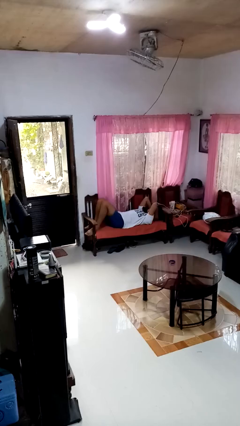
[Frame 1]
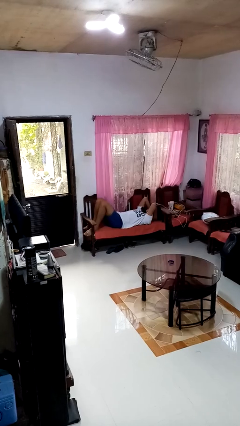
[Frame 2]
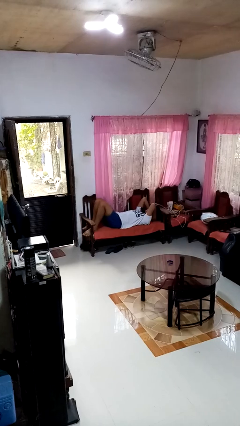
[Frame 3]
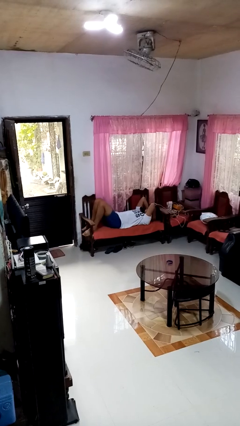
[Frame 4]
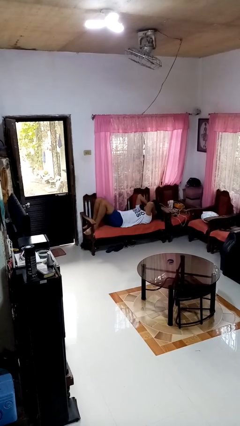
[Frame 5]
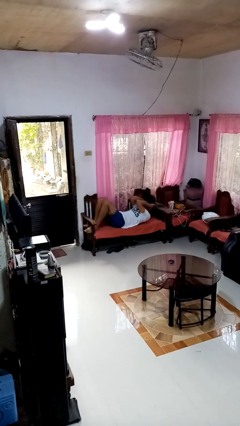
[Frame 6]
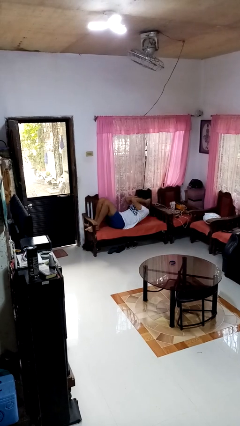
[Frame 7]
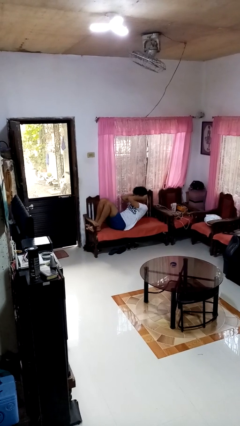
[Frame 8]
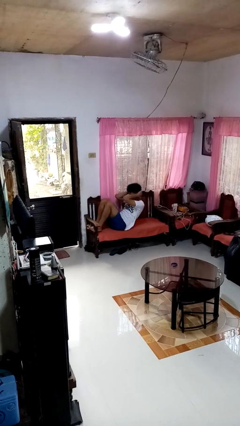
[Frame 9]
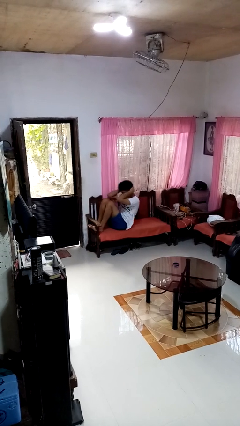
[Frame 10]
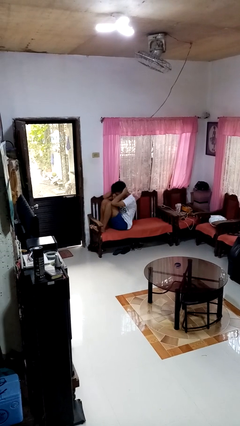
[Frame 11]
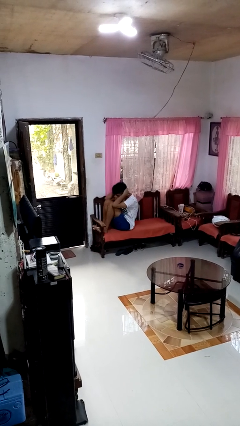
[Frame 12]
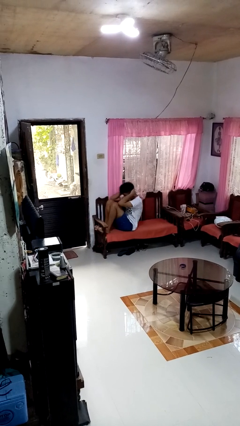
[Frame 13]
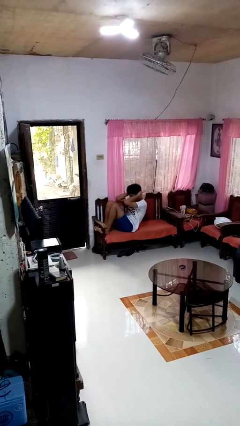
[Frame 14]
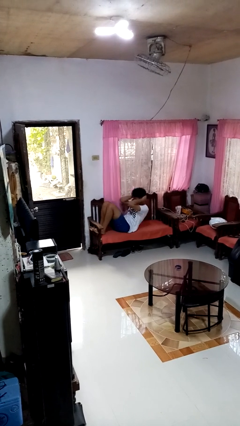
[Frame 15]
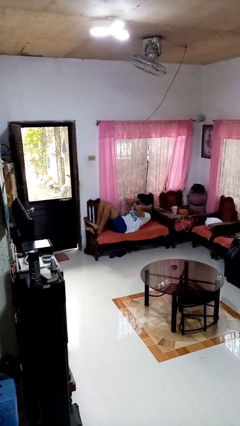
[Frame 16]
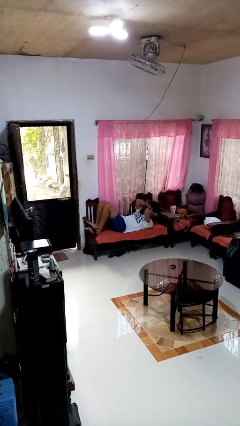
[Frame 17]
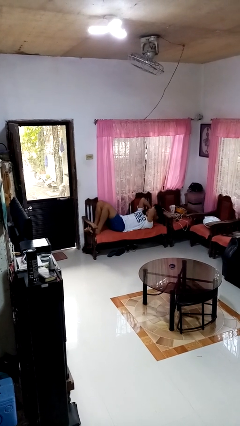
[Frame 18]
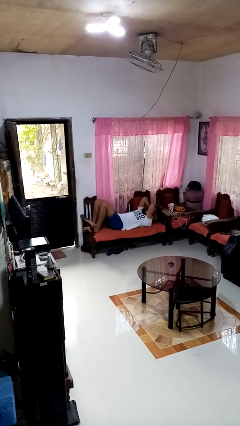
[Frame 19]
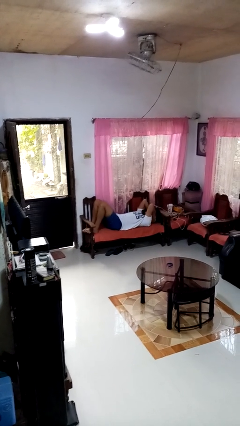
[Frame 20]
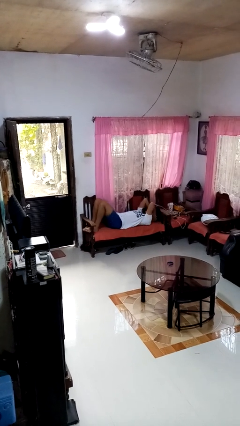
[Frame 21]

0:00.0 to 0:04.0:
person exercises with situp

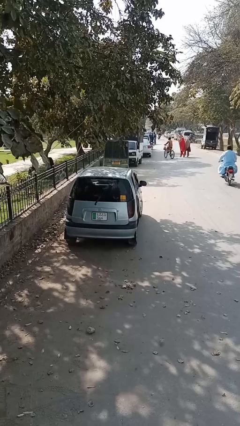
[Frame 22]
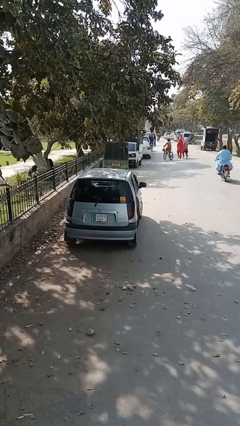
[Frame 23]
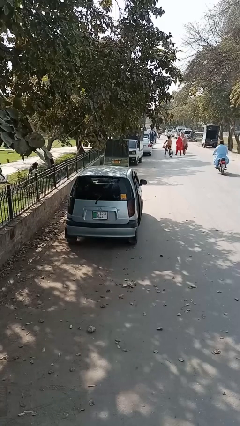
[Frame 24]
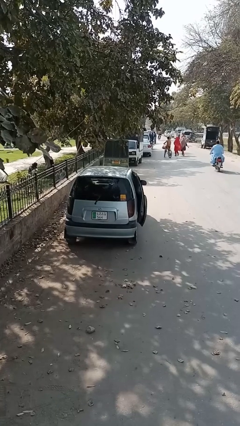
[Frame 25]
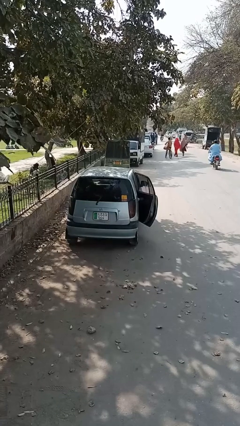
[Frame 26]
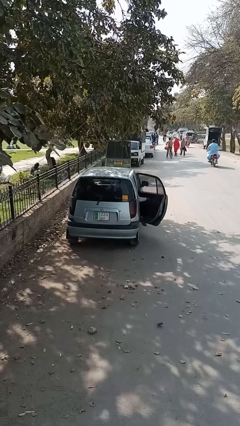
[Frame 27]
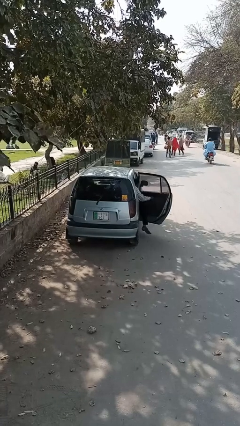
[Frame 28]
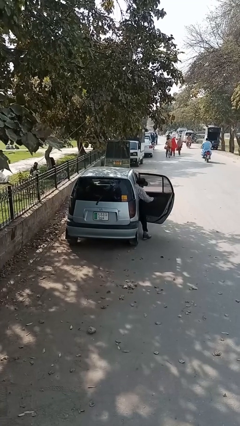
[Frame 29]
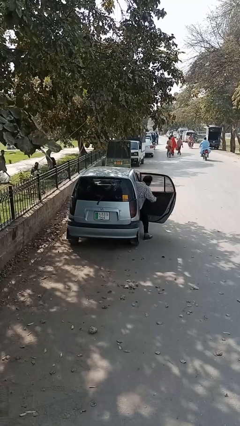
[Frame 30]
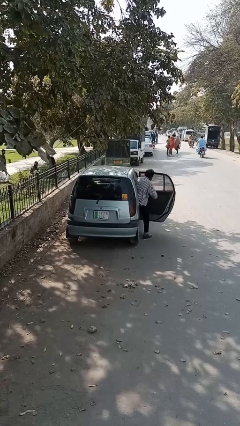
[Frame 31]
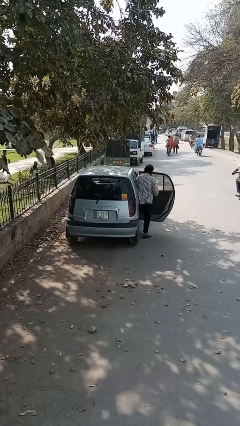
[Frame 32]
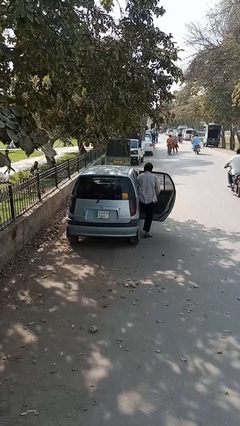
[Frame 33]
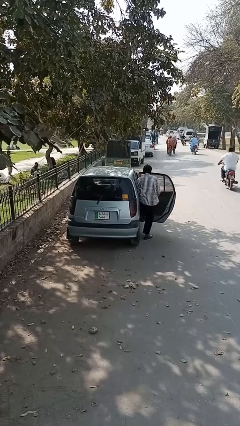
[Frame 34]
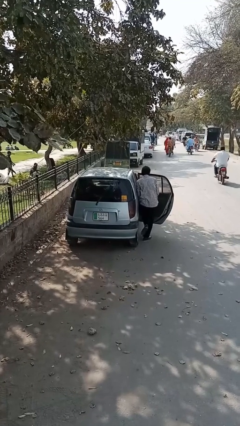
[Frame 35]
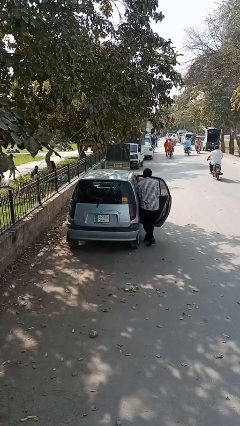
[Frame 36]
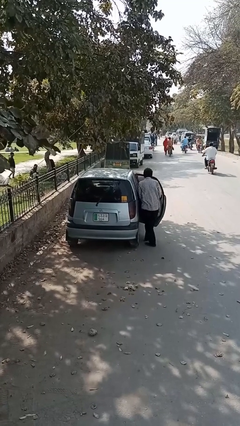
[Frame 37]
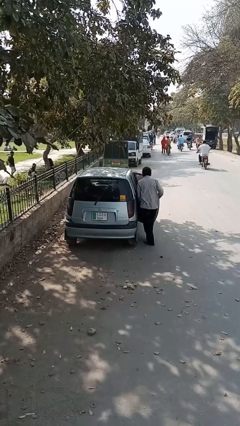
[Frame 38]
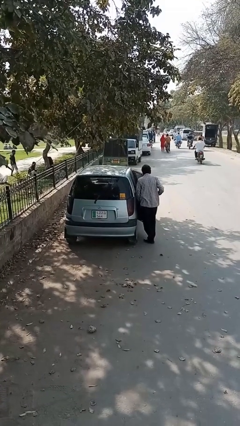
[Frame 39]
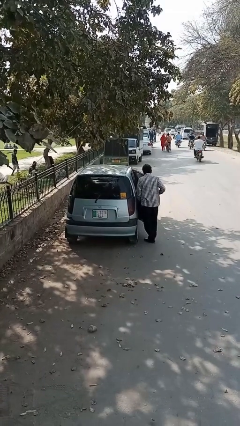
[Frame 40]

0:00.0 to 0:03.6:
car drops off person

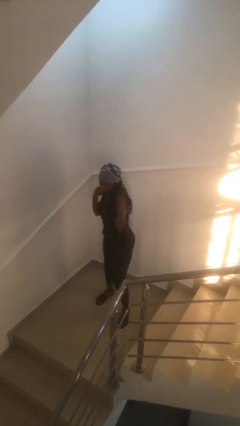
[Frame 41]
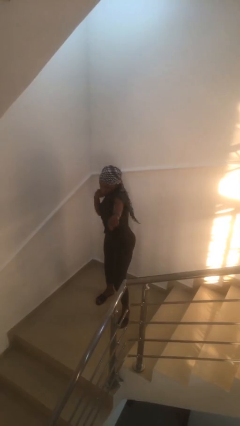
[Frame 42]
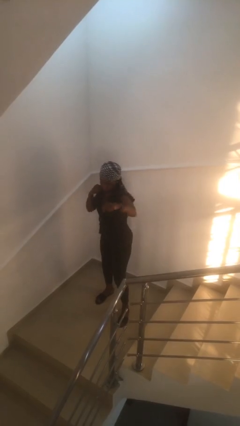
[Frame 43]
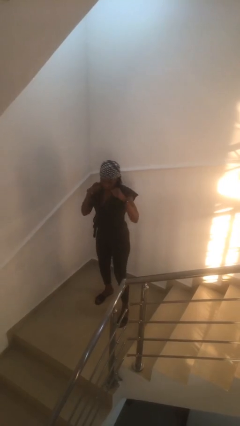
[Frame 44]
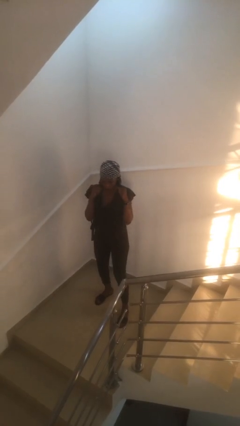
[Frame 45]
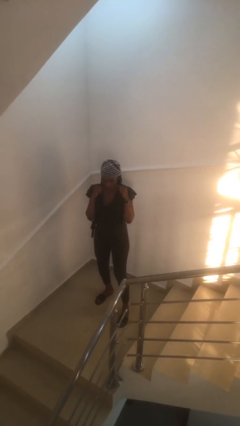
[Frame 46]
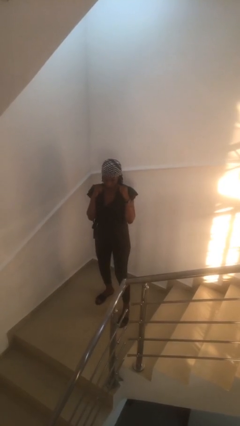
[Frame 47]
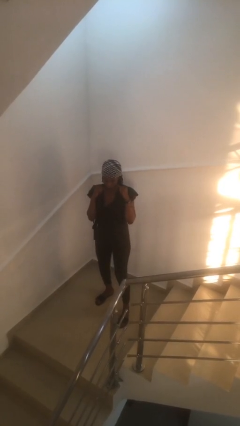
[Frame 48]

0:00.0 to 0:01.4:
person punches

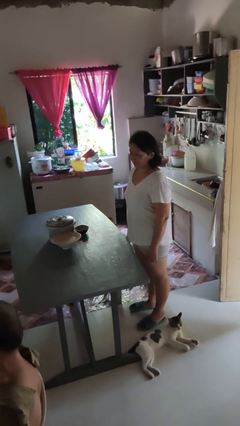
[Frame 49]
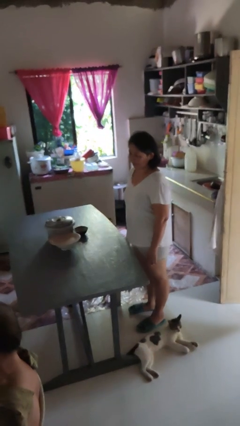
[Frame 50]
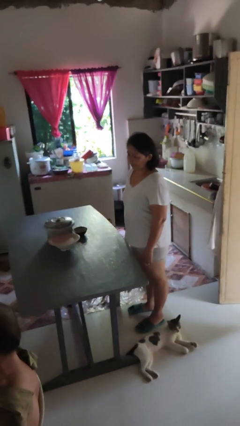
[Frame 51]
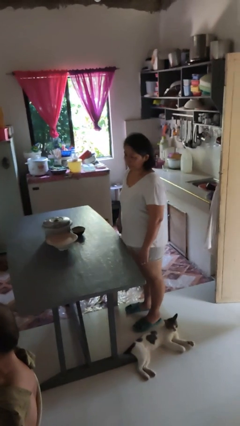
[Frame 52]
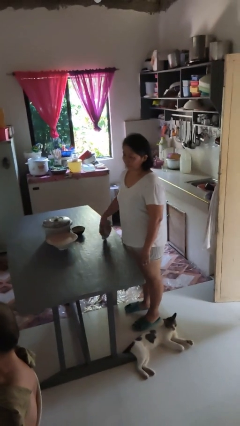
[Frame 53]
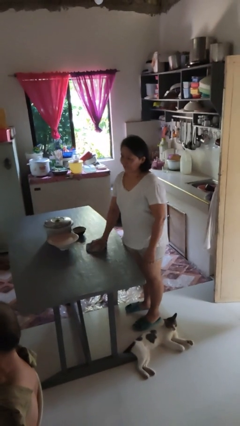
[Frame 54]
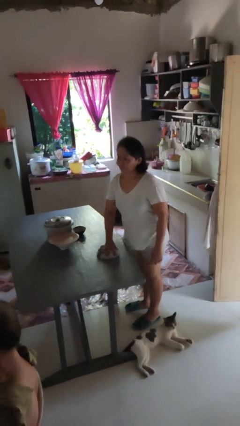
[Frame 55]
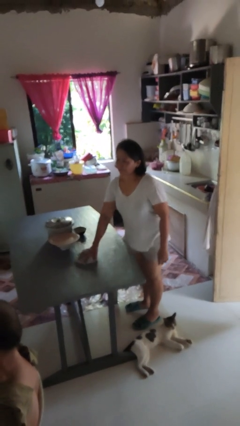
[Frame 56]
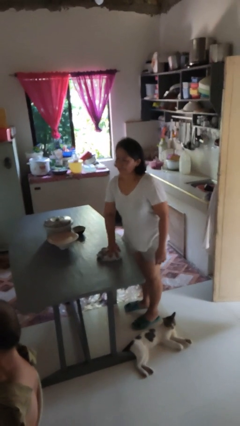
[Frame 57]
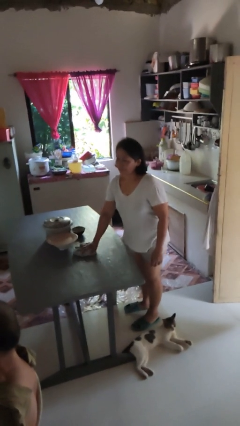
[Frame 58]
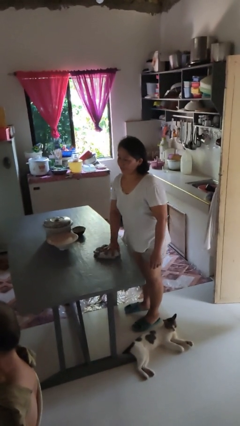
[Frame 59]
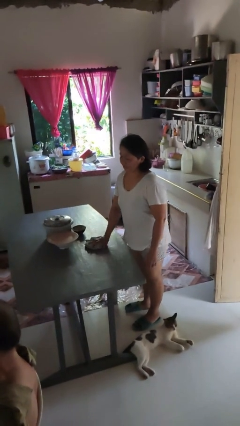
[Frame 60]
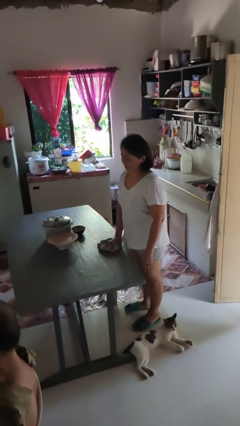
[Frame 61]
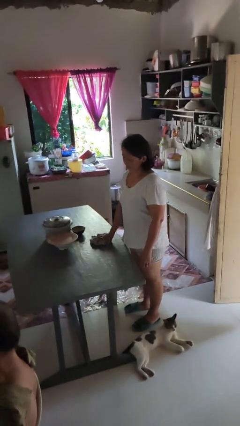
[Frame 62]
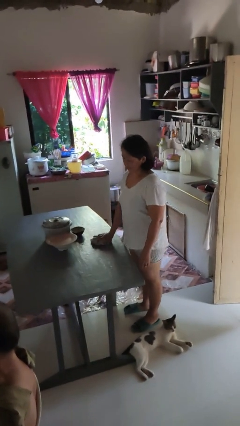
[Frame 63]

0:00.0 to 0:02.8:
person cleans table with rag

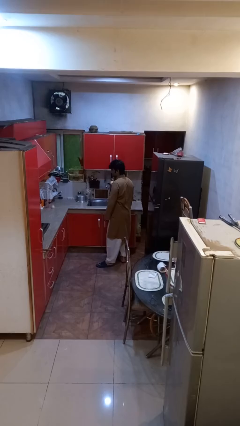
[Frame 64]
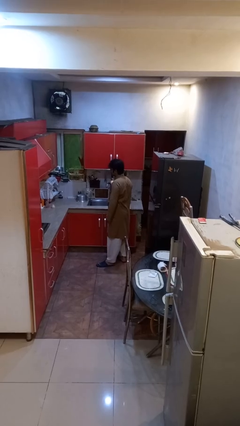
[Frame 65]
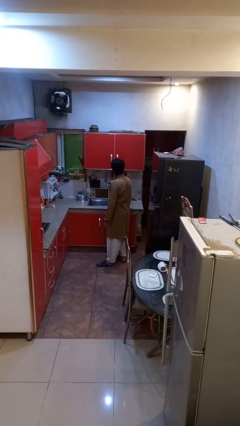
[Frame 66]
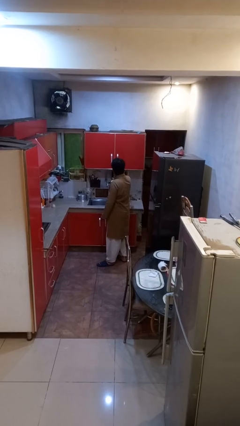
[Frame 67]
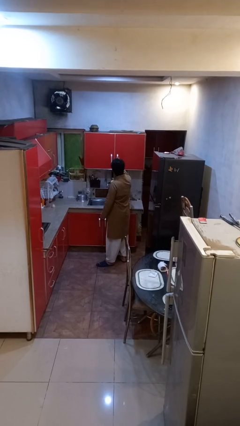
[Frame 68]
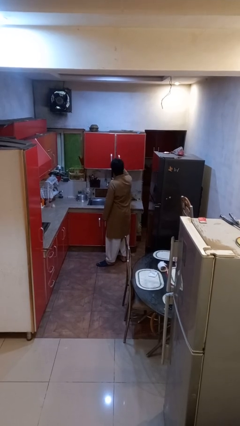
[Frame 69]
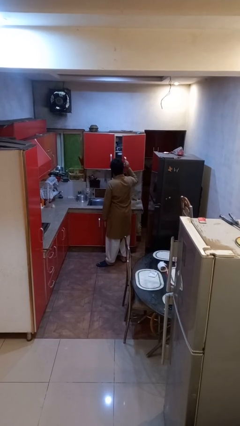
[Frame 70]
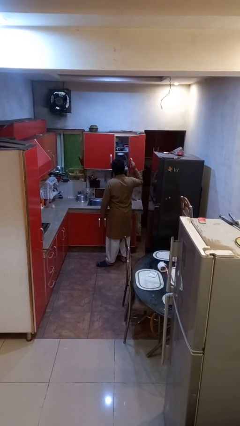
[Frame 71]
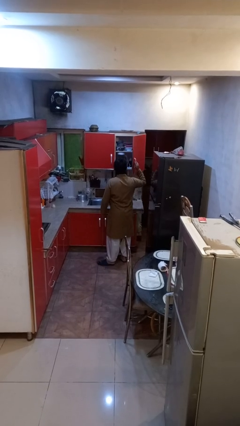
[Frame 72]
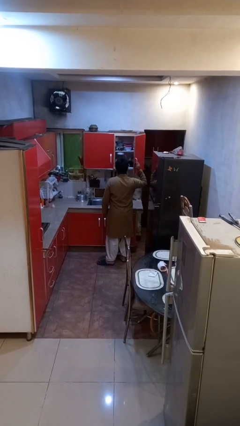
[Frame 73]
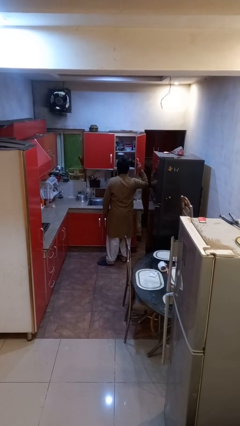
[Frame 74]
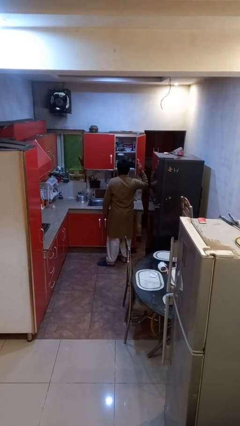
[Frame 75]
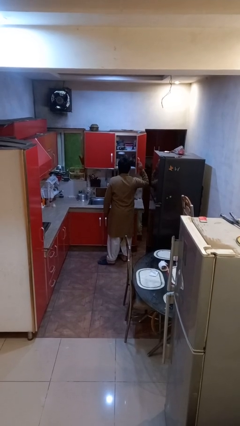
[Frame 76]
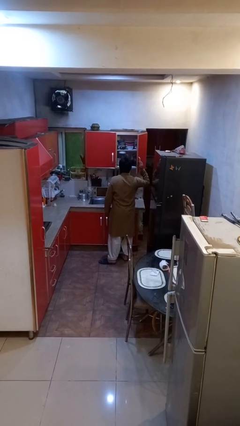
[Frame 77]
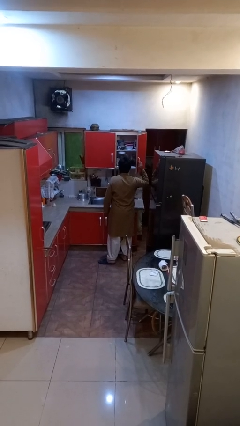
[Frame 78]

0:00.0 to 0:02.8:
person opens cabinet

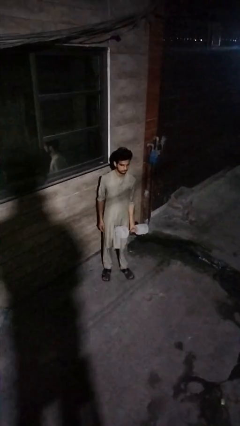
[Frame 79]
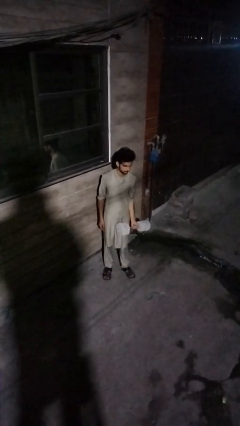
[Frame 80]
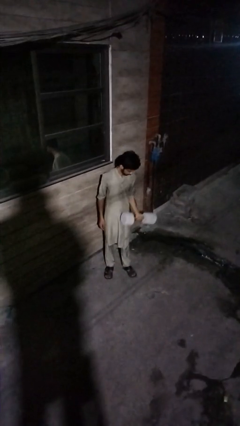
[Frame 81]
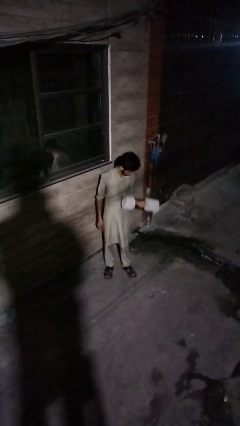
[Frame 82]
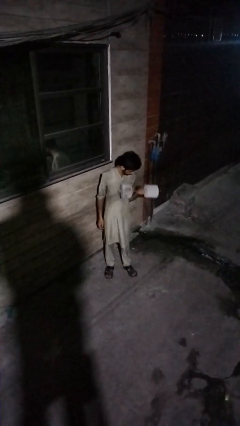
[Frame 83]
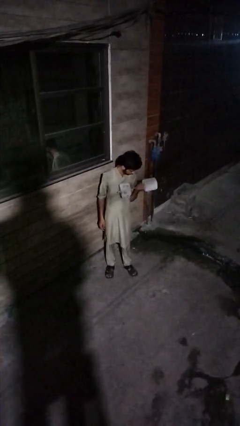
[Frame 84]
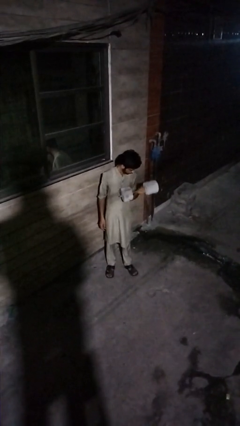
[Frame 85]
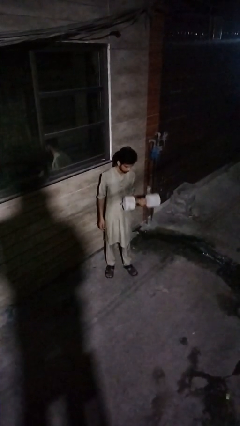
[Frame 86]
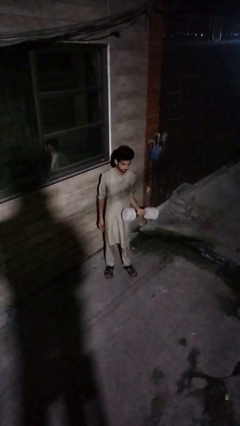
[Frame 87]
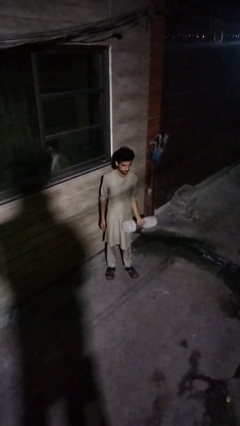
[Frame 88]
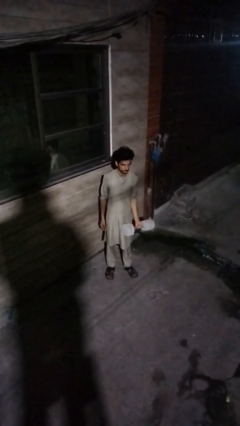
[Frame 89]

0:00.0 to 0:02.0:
person lifts dumbbells

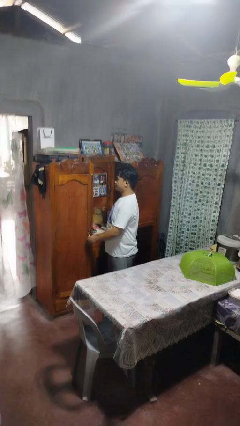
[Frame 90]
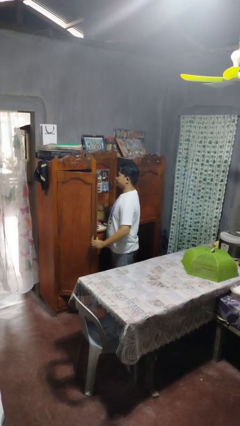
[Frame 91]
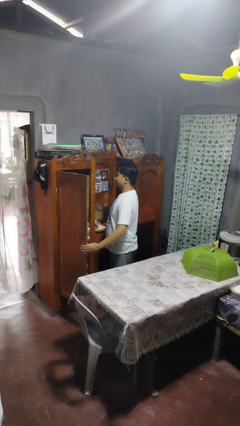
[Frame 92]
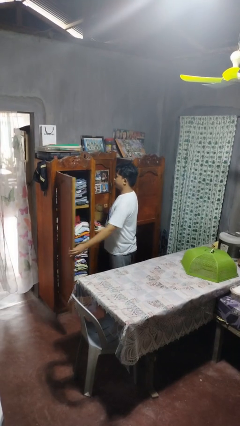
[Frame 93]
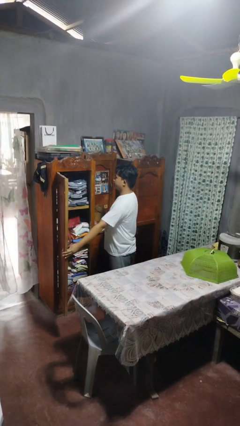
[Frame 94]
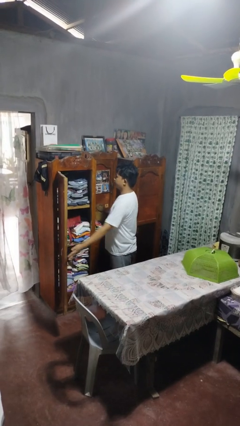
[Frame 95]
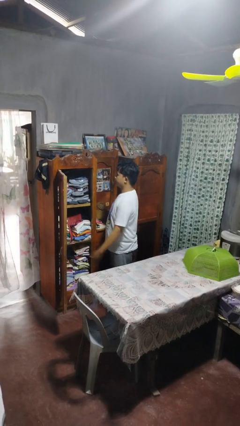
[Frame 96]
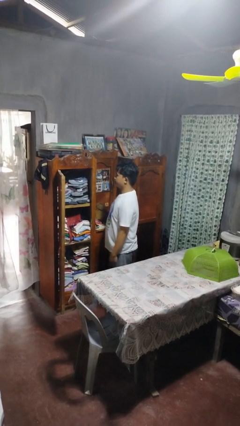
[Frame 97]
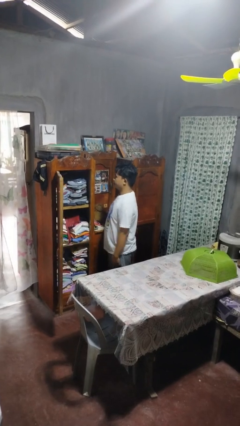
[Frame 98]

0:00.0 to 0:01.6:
person opens closet door
